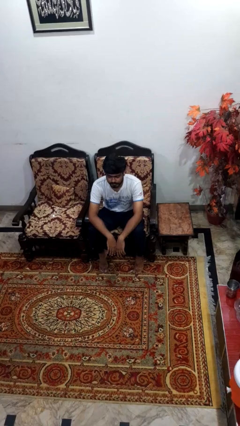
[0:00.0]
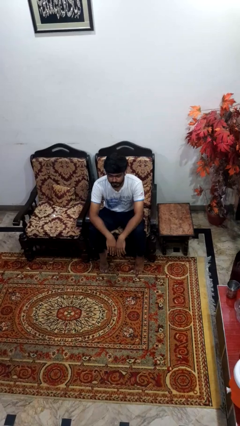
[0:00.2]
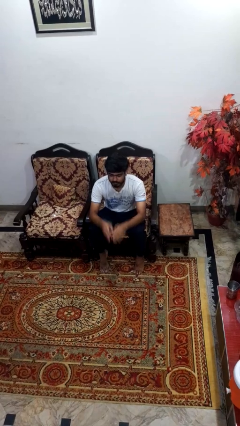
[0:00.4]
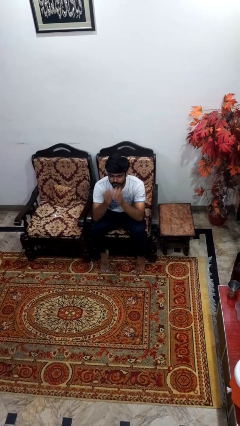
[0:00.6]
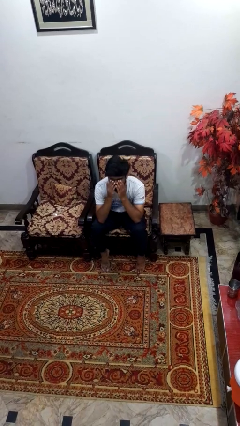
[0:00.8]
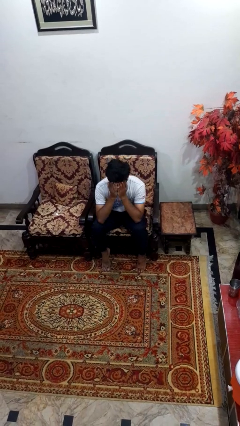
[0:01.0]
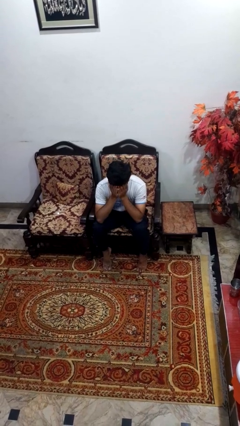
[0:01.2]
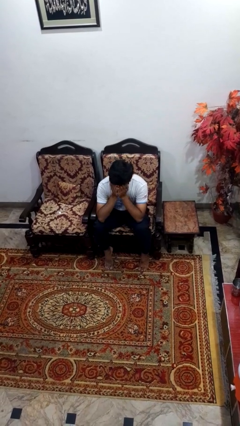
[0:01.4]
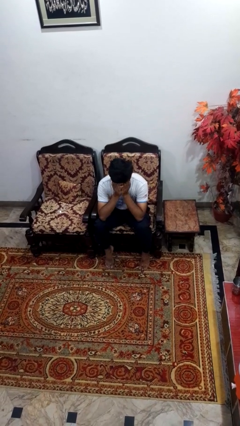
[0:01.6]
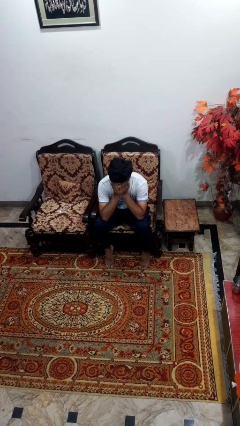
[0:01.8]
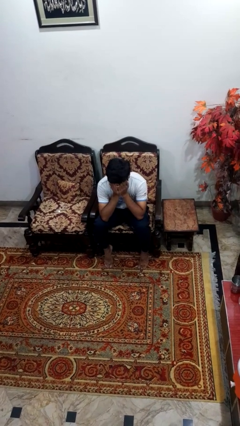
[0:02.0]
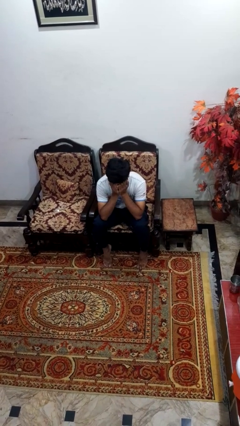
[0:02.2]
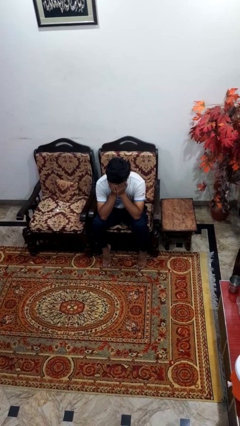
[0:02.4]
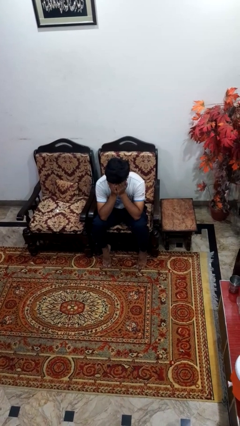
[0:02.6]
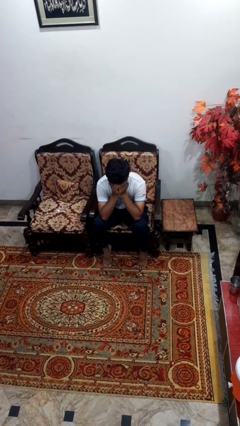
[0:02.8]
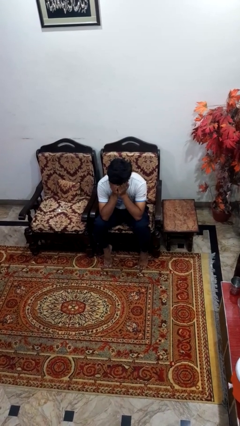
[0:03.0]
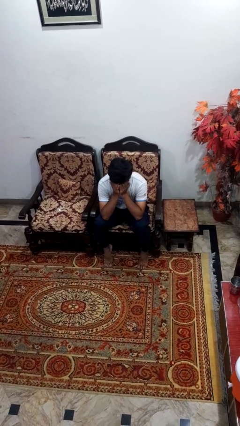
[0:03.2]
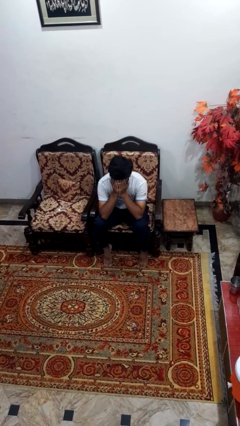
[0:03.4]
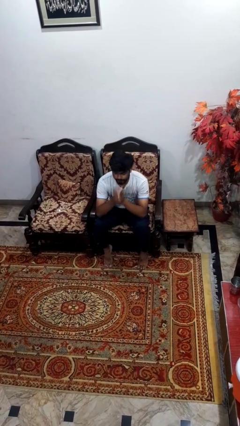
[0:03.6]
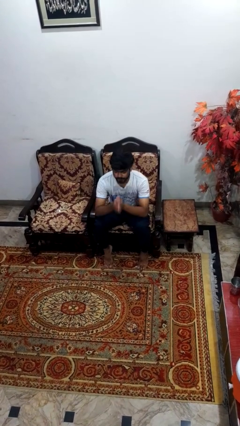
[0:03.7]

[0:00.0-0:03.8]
person covers face with hands

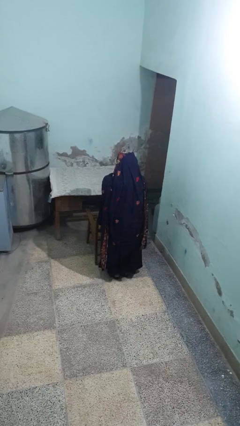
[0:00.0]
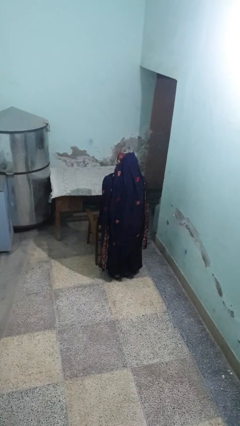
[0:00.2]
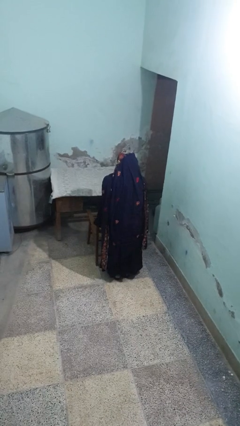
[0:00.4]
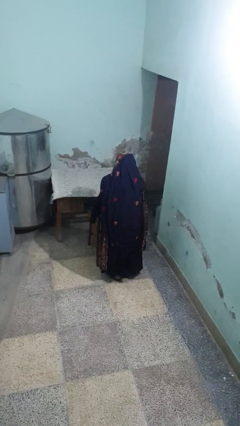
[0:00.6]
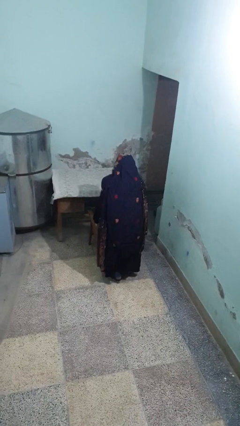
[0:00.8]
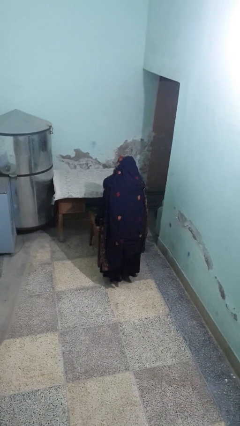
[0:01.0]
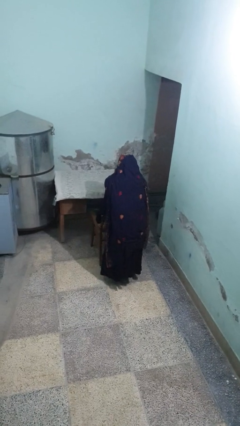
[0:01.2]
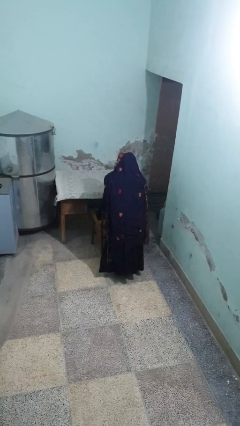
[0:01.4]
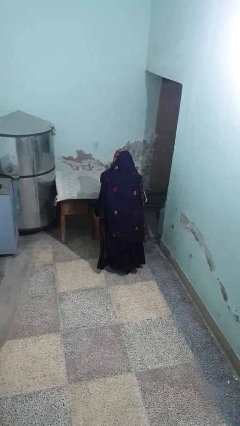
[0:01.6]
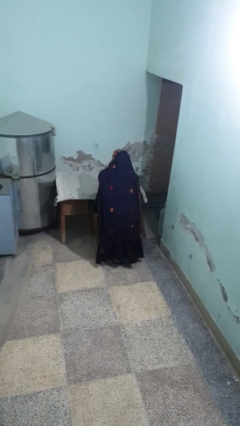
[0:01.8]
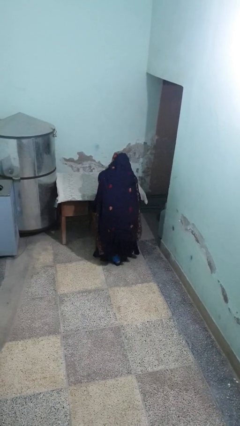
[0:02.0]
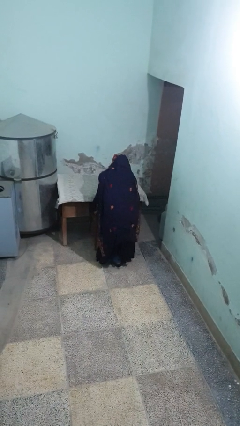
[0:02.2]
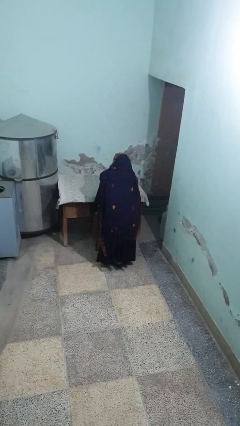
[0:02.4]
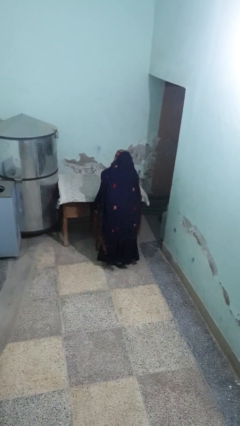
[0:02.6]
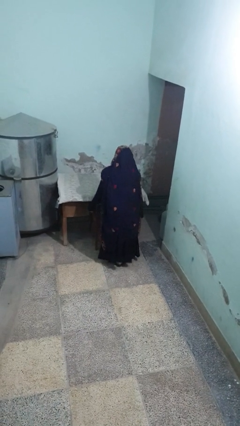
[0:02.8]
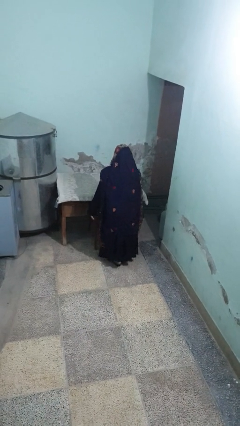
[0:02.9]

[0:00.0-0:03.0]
person pushes in chair

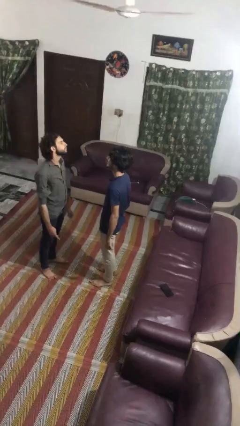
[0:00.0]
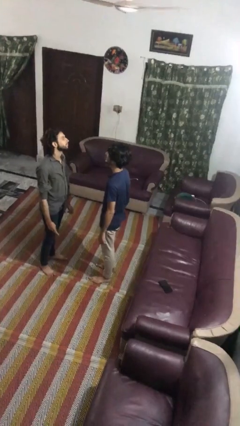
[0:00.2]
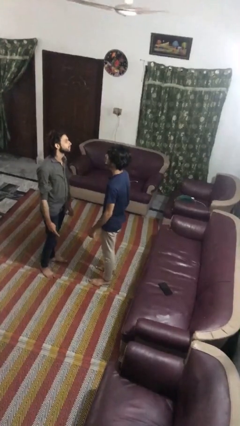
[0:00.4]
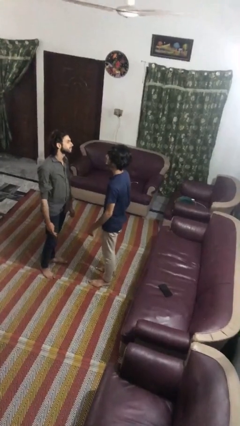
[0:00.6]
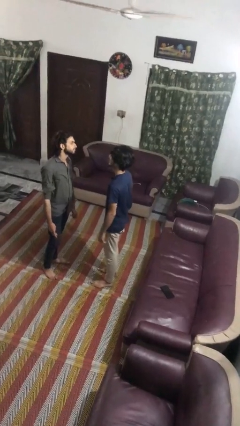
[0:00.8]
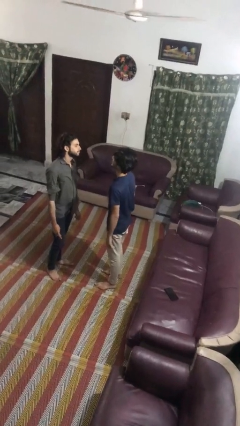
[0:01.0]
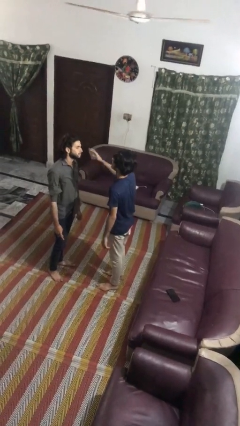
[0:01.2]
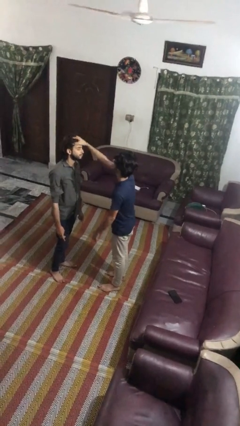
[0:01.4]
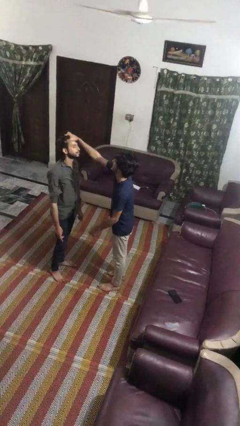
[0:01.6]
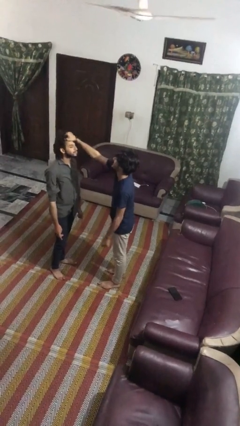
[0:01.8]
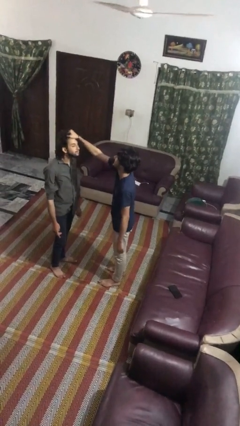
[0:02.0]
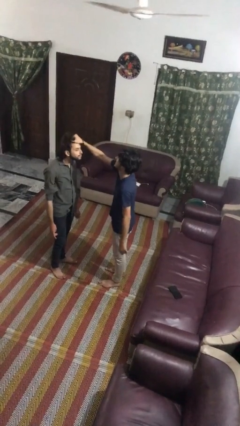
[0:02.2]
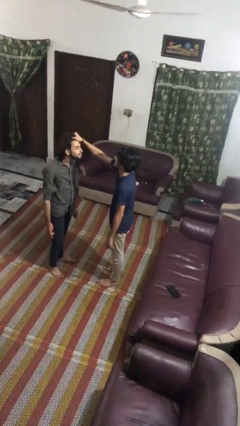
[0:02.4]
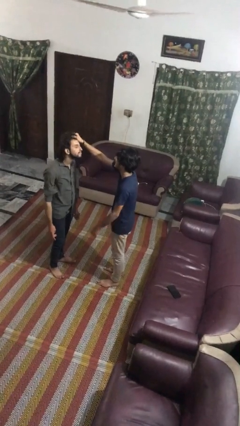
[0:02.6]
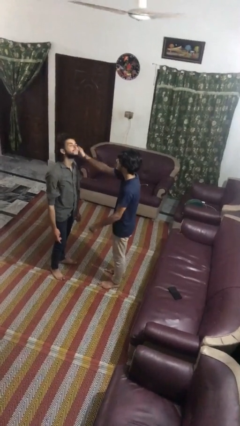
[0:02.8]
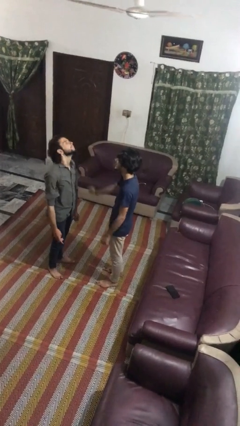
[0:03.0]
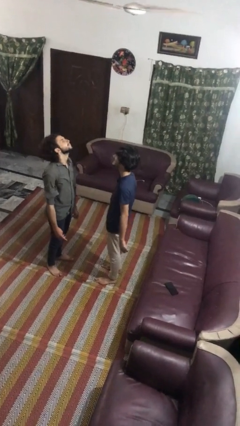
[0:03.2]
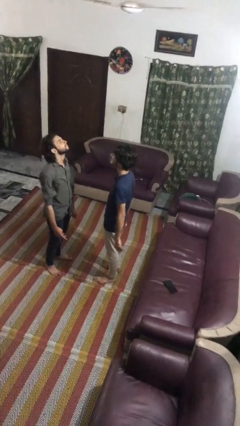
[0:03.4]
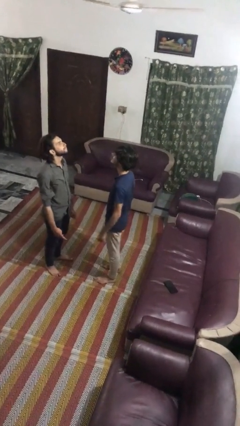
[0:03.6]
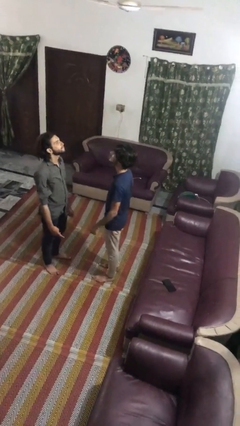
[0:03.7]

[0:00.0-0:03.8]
person grabs person by hair

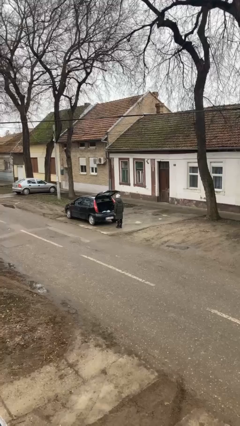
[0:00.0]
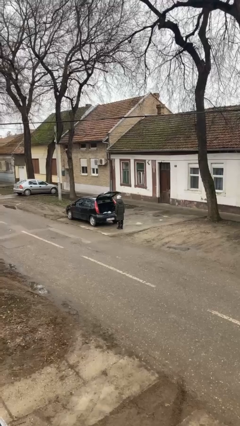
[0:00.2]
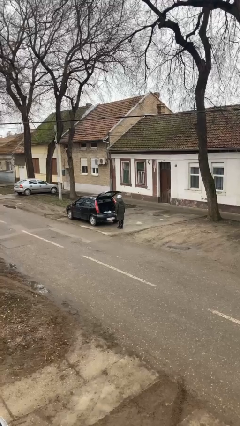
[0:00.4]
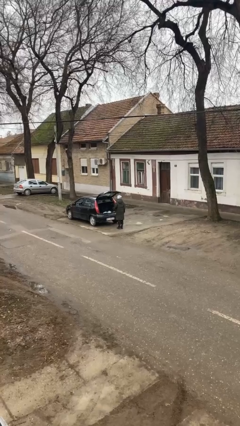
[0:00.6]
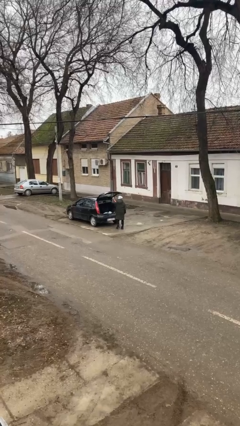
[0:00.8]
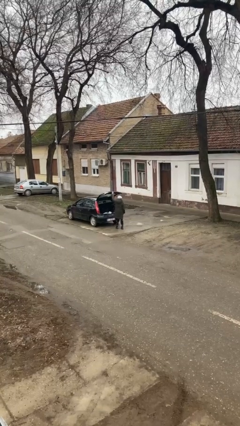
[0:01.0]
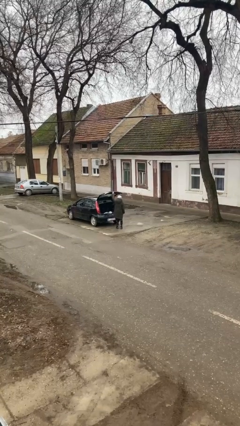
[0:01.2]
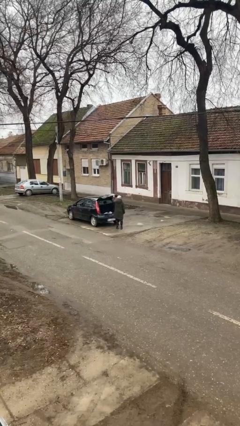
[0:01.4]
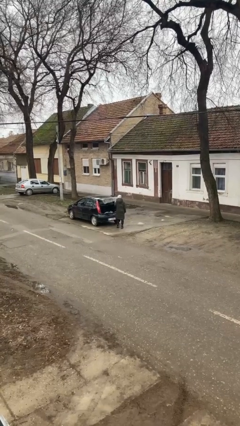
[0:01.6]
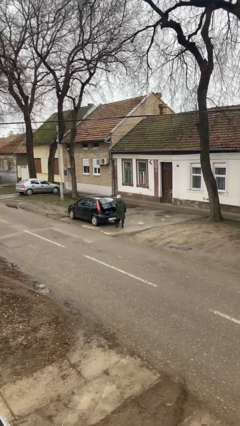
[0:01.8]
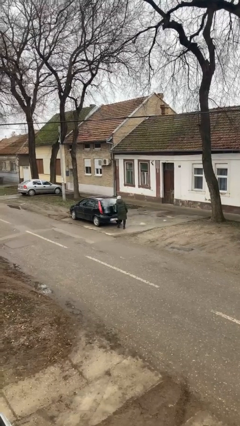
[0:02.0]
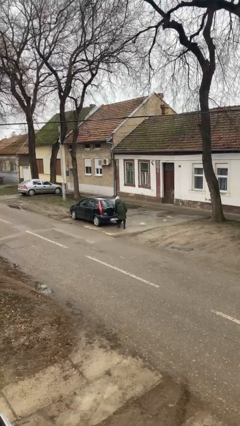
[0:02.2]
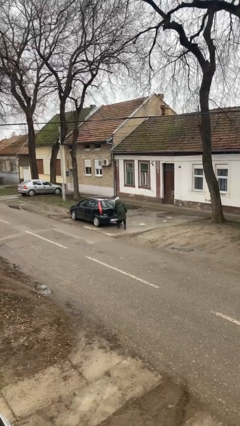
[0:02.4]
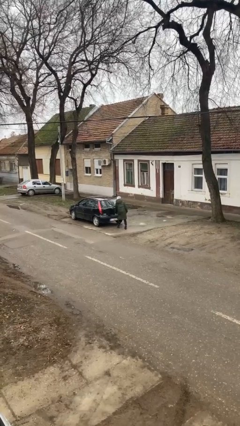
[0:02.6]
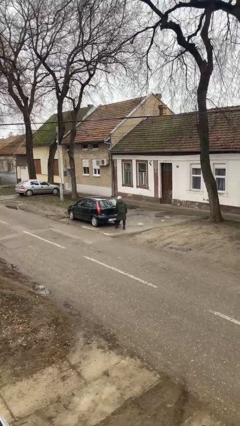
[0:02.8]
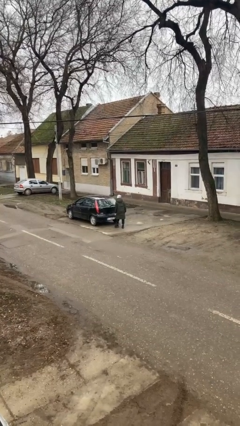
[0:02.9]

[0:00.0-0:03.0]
person closes car trunk

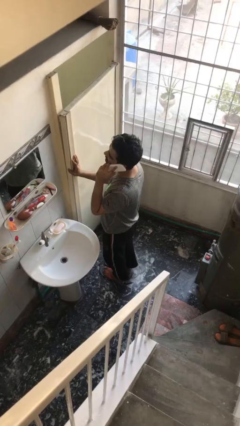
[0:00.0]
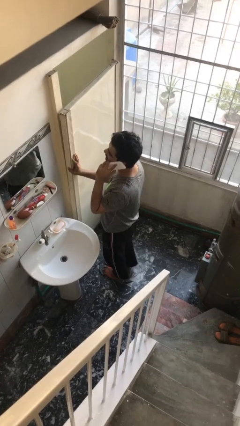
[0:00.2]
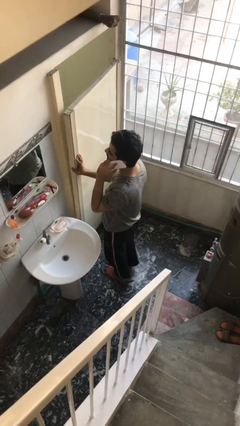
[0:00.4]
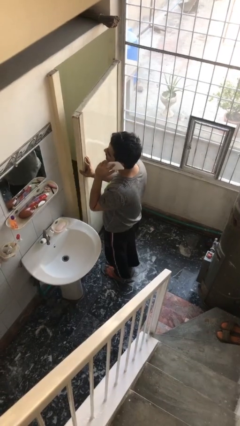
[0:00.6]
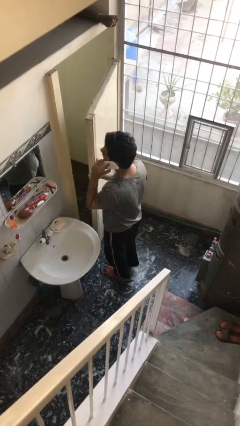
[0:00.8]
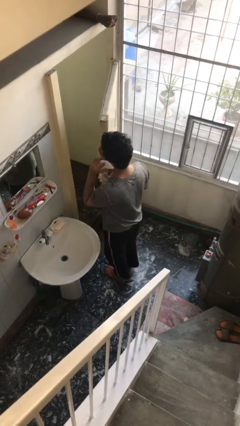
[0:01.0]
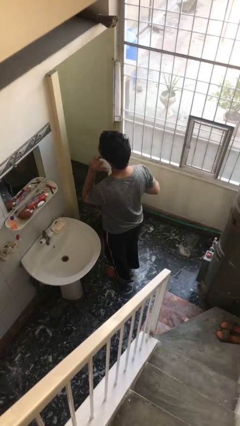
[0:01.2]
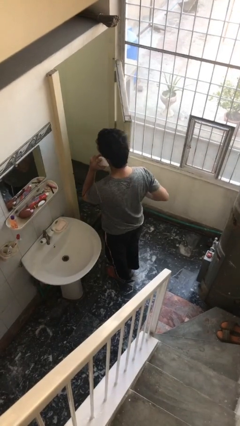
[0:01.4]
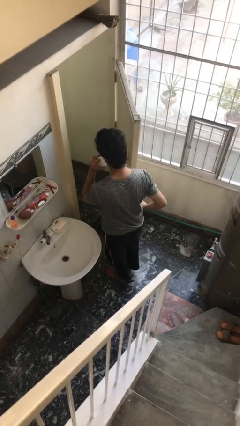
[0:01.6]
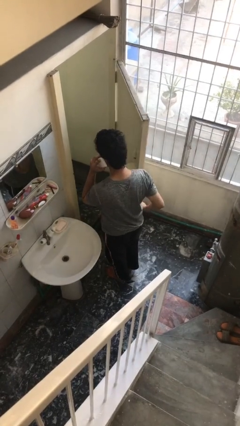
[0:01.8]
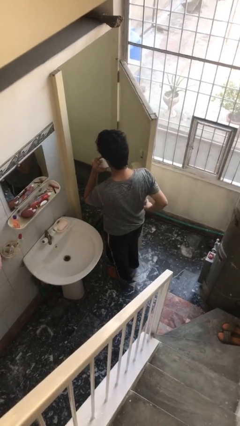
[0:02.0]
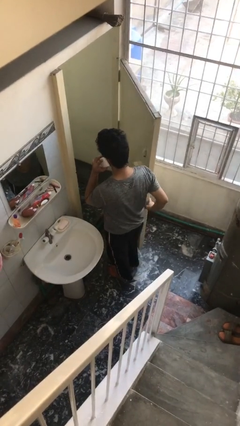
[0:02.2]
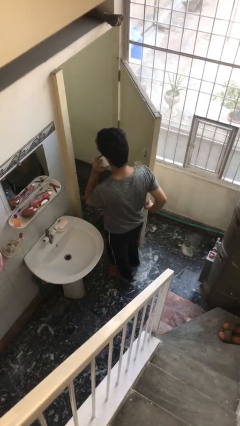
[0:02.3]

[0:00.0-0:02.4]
person opens facility door

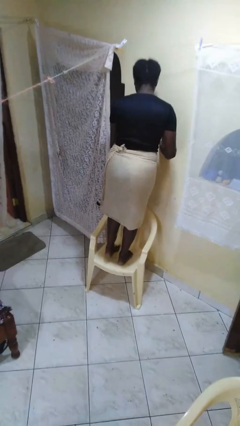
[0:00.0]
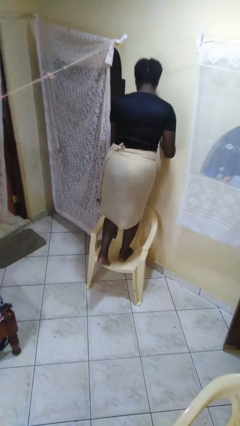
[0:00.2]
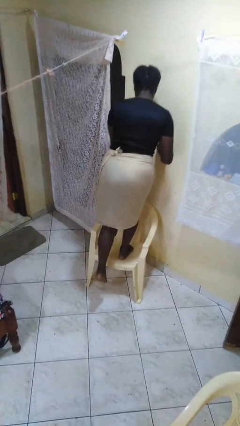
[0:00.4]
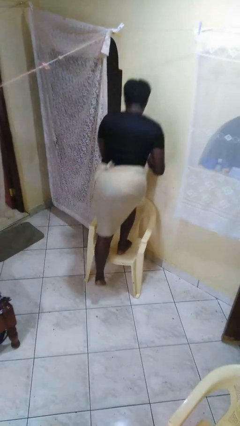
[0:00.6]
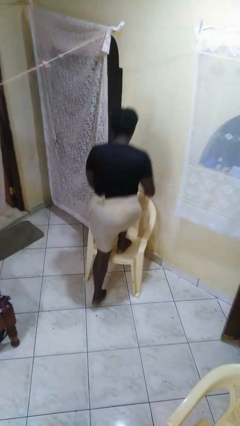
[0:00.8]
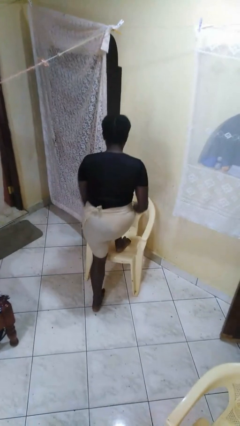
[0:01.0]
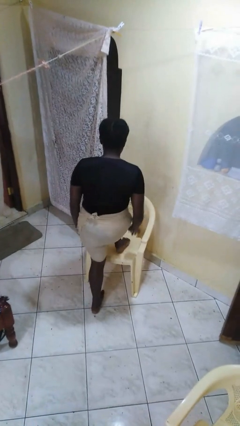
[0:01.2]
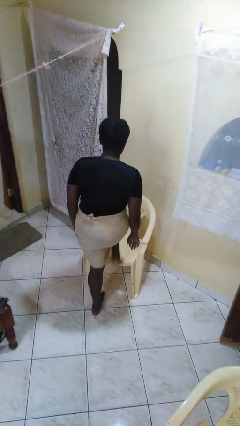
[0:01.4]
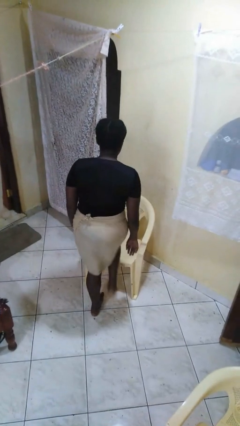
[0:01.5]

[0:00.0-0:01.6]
person climbs off chair
